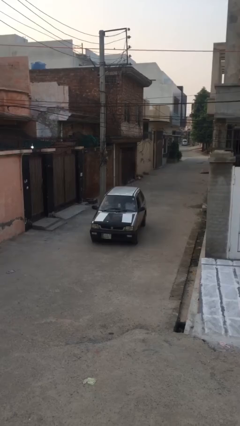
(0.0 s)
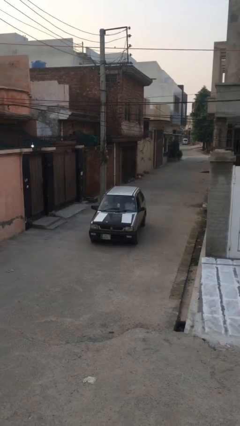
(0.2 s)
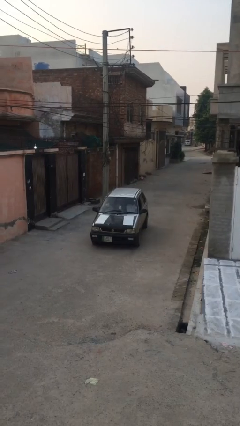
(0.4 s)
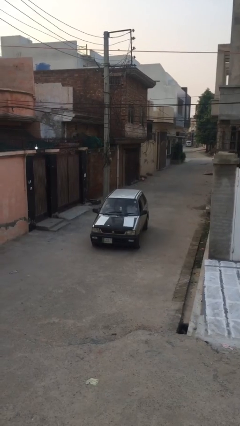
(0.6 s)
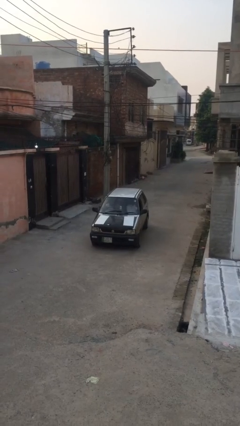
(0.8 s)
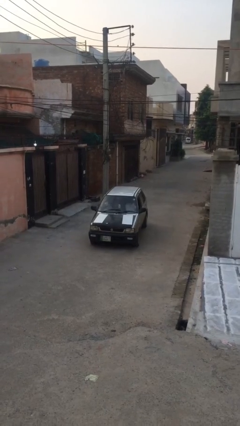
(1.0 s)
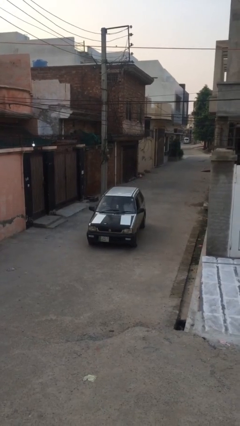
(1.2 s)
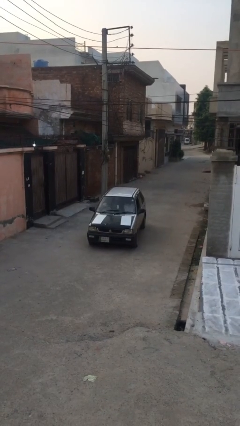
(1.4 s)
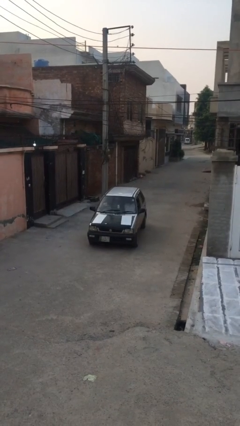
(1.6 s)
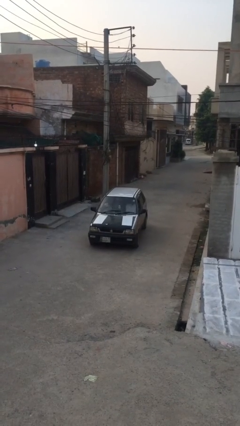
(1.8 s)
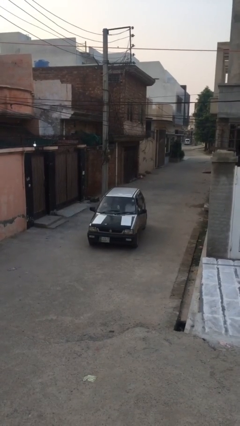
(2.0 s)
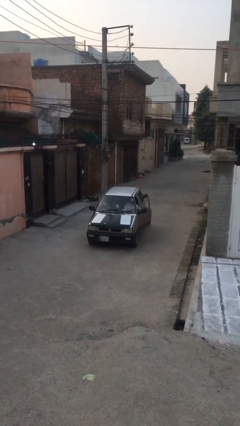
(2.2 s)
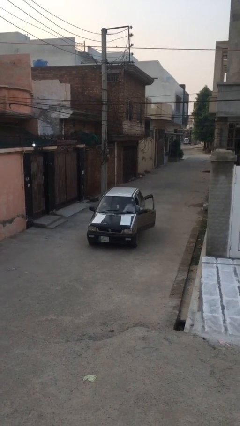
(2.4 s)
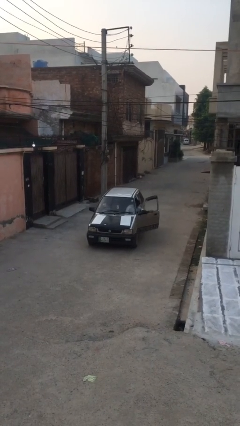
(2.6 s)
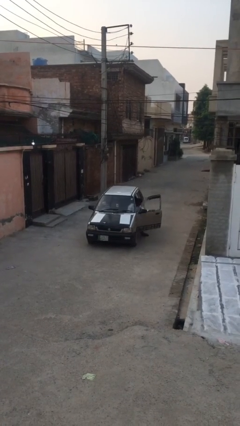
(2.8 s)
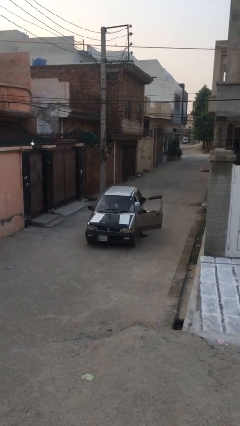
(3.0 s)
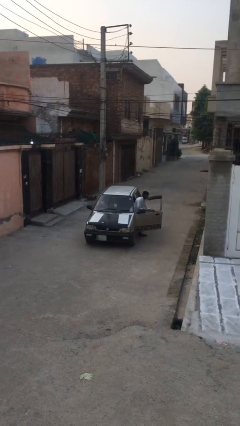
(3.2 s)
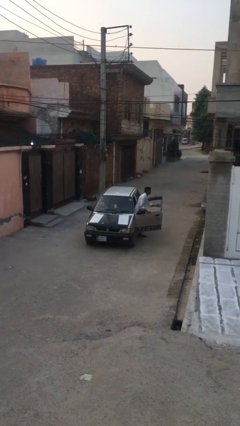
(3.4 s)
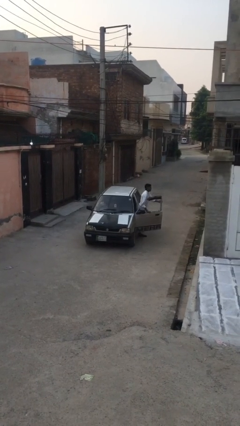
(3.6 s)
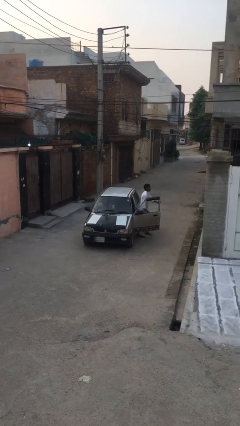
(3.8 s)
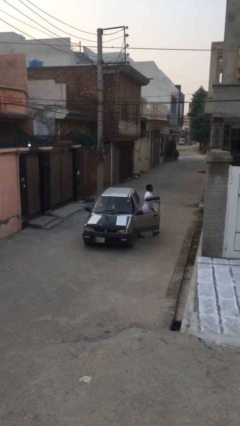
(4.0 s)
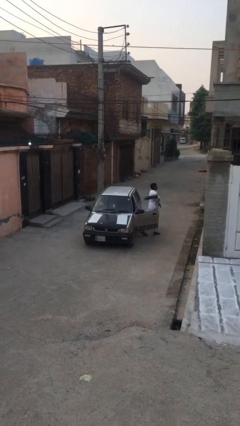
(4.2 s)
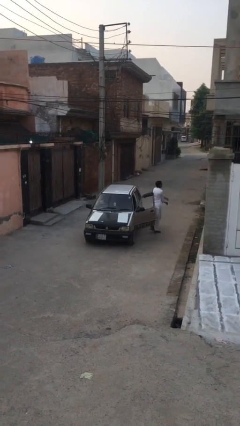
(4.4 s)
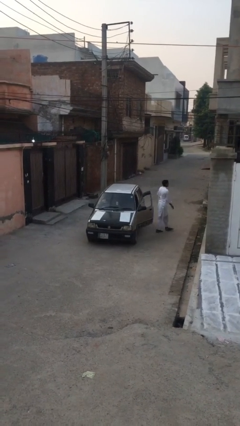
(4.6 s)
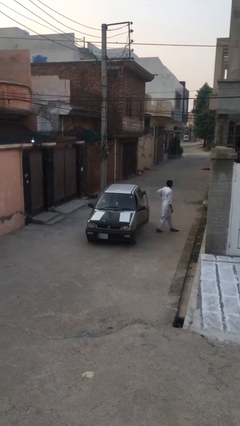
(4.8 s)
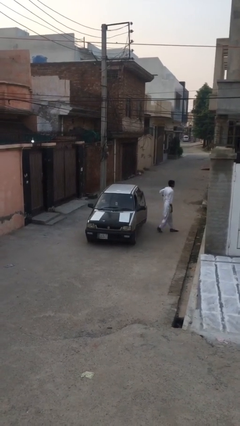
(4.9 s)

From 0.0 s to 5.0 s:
car drops off person

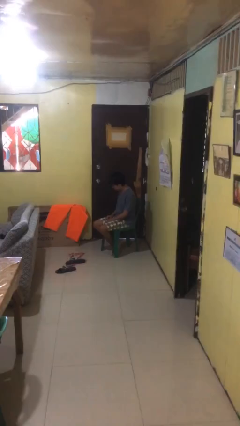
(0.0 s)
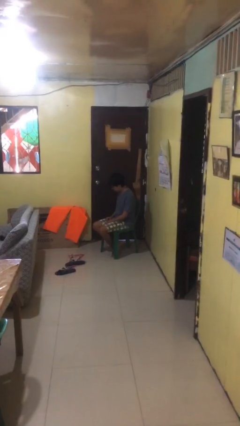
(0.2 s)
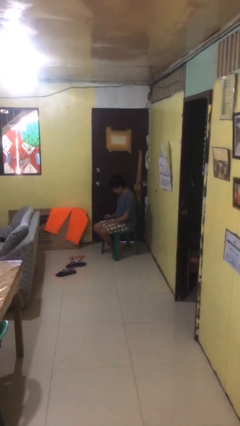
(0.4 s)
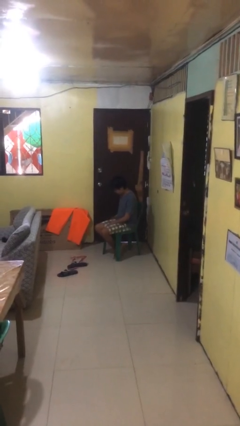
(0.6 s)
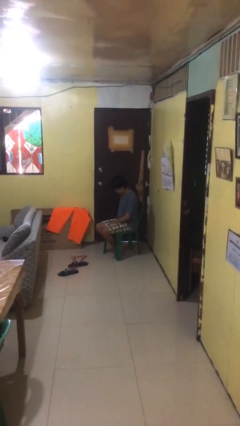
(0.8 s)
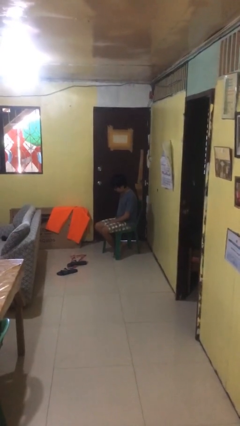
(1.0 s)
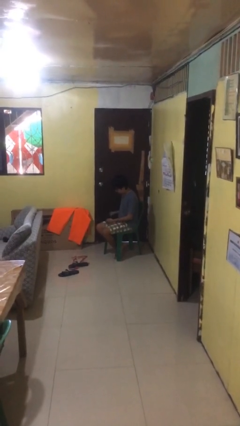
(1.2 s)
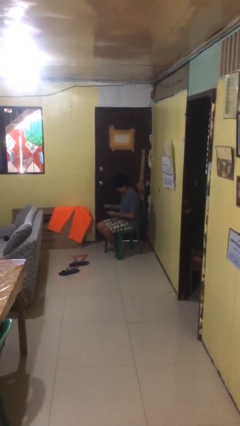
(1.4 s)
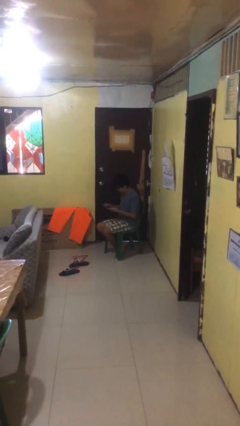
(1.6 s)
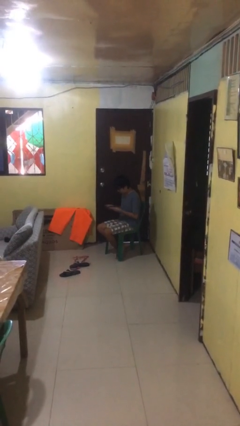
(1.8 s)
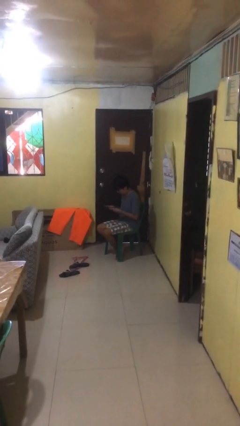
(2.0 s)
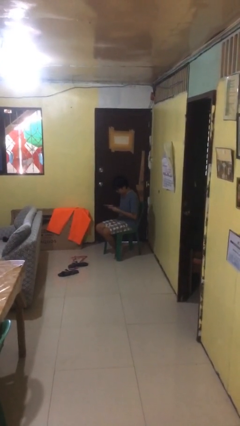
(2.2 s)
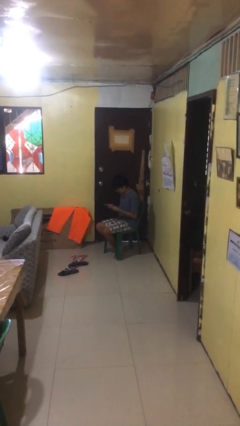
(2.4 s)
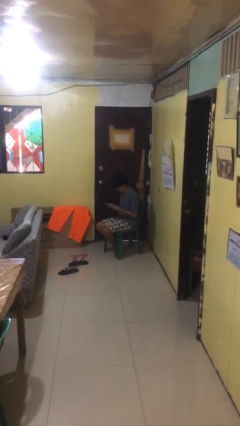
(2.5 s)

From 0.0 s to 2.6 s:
person takes phone from pocket

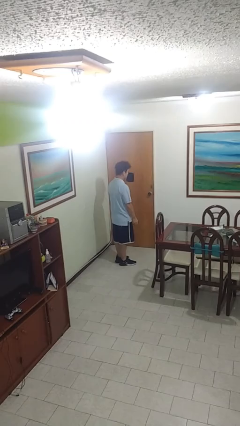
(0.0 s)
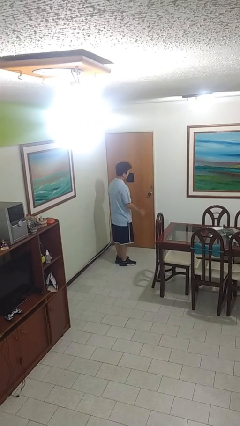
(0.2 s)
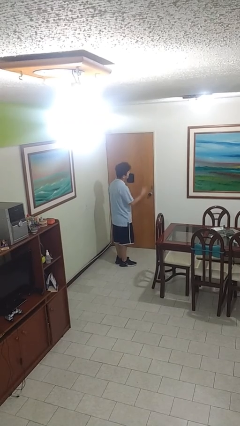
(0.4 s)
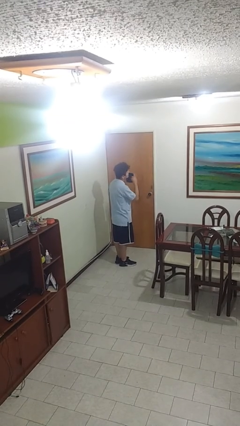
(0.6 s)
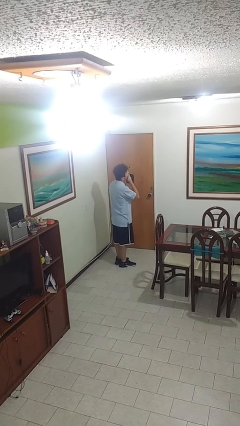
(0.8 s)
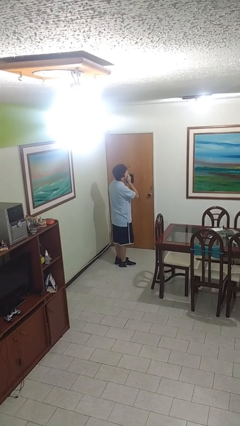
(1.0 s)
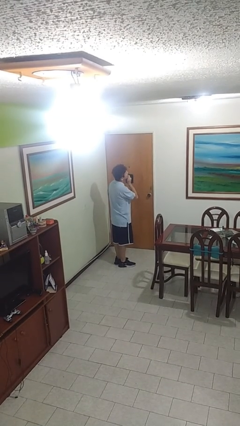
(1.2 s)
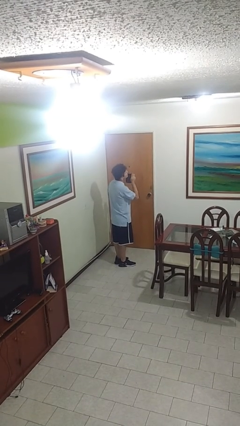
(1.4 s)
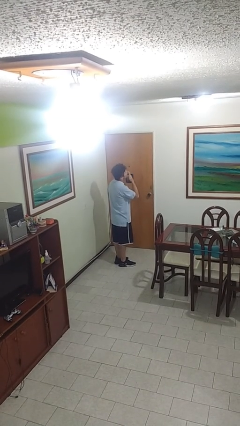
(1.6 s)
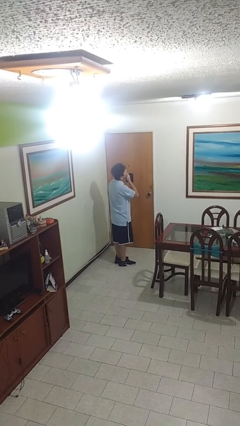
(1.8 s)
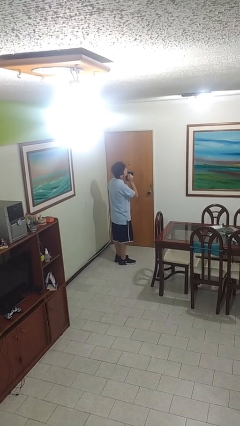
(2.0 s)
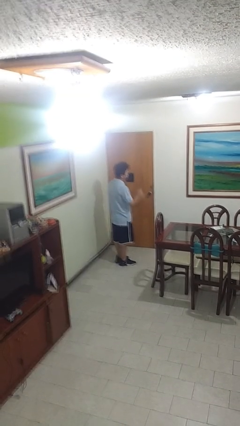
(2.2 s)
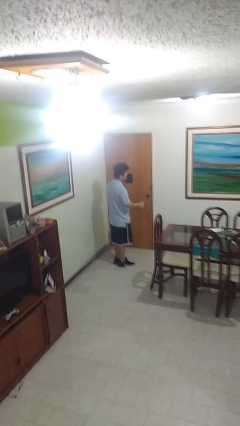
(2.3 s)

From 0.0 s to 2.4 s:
person strokes chin

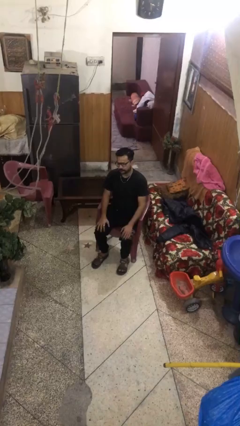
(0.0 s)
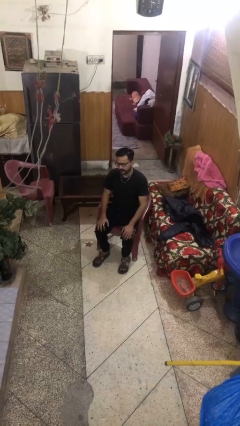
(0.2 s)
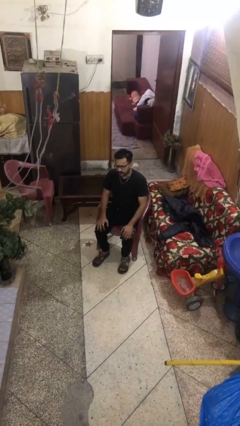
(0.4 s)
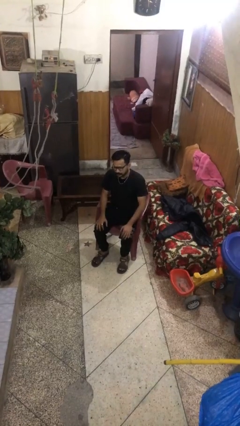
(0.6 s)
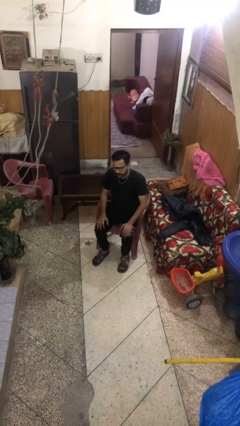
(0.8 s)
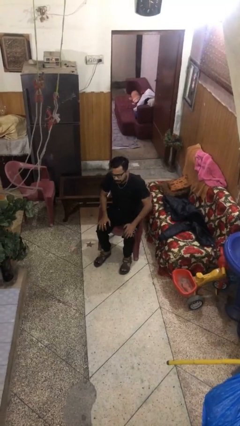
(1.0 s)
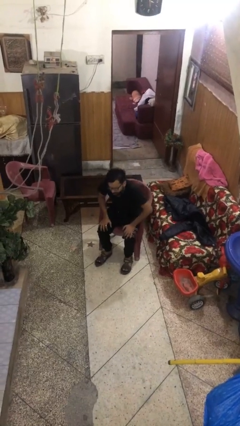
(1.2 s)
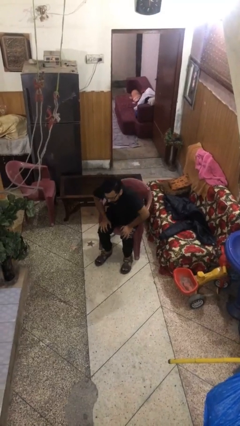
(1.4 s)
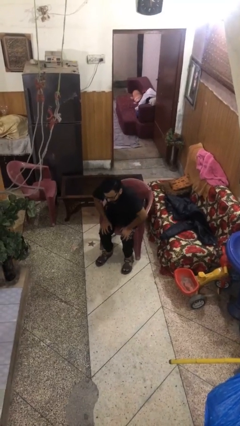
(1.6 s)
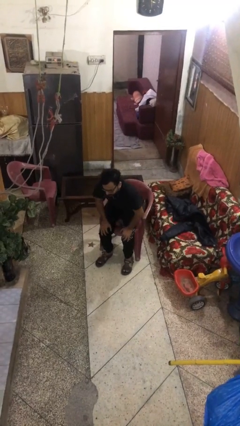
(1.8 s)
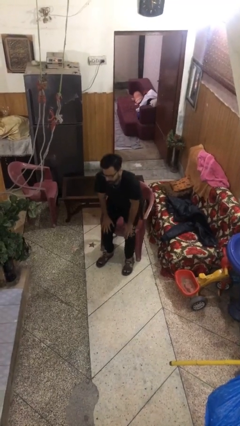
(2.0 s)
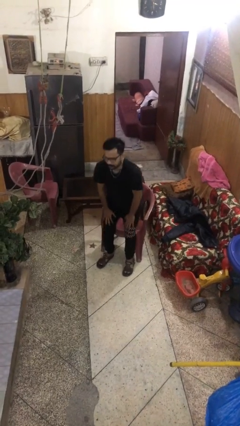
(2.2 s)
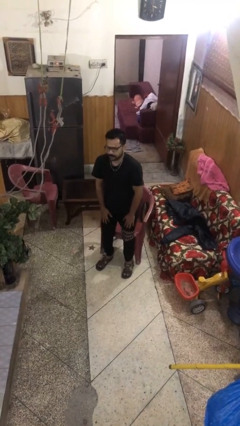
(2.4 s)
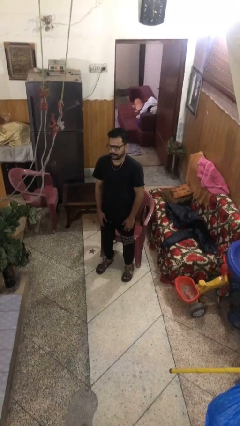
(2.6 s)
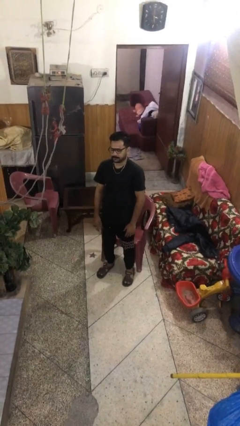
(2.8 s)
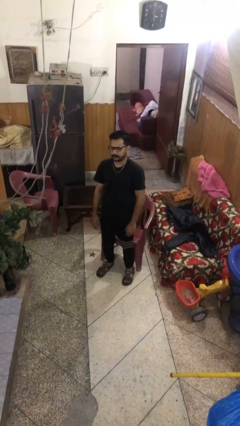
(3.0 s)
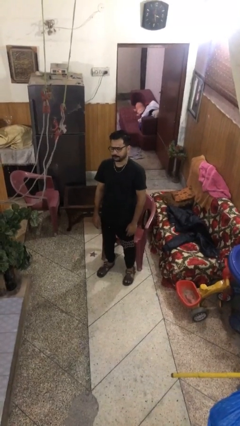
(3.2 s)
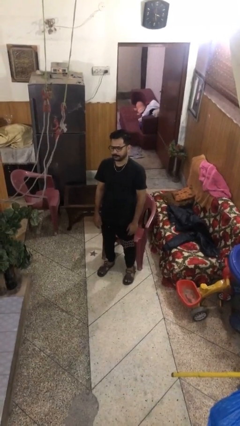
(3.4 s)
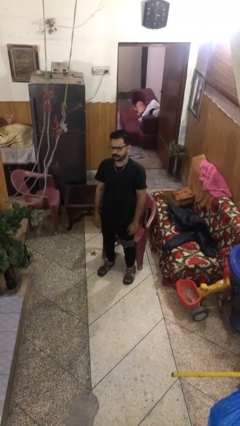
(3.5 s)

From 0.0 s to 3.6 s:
person stands up

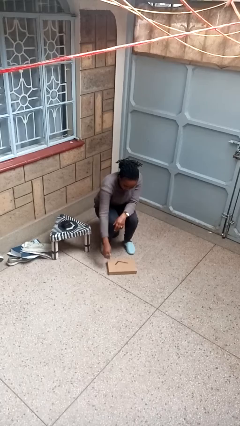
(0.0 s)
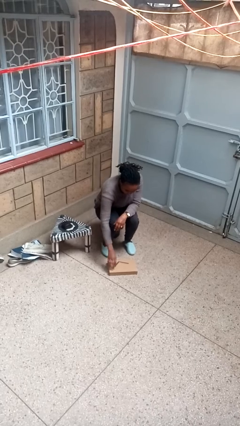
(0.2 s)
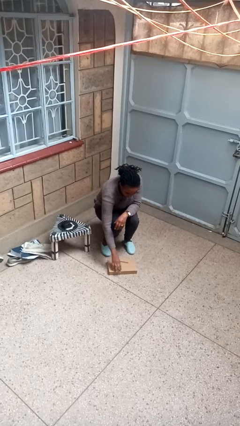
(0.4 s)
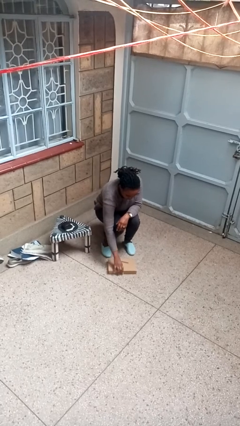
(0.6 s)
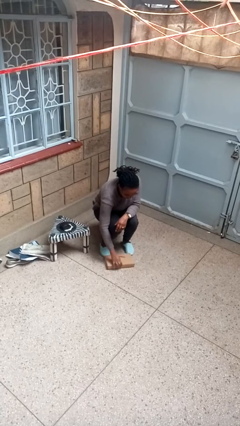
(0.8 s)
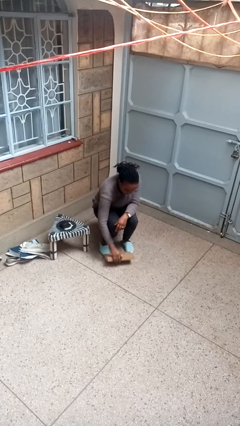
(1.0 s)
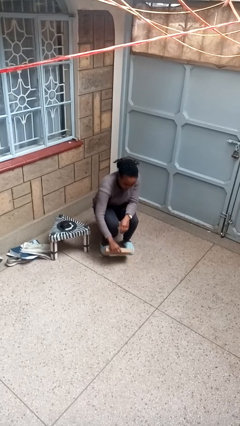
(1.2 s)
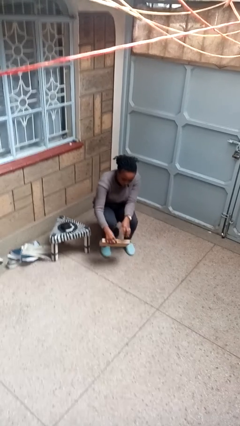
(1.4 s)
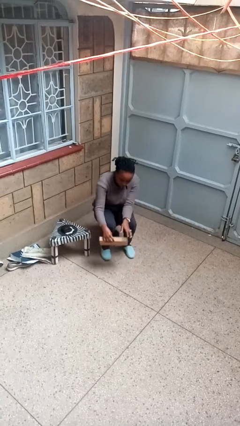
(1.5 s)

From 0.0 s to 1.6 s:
person picks up object from floor

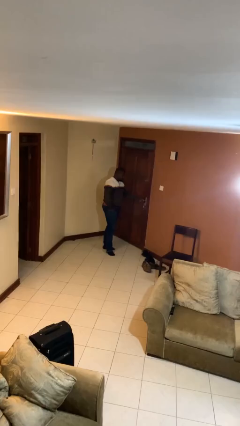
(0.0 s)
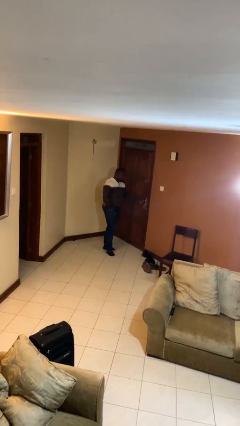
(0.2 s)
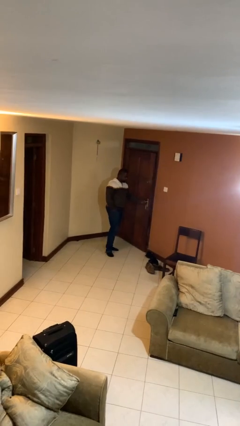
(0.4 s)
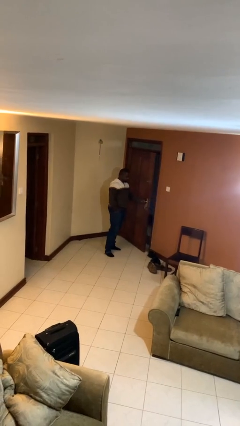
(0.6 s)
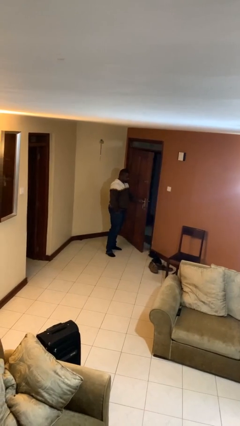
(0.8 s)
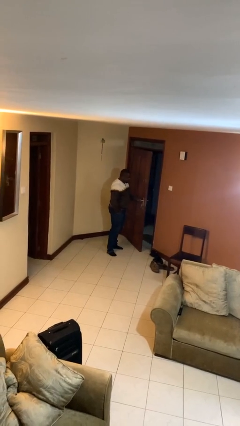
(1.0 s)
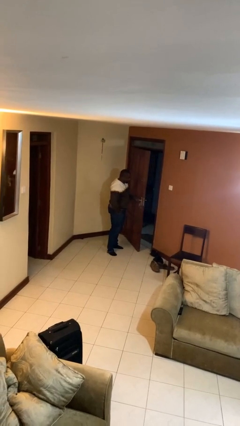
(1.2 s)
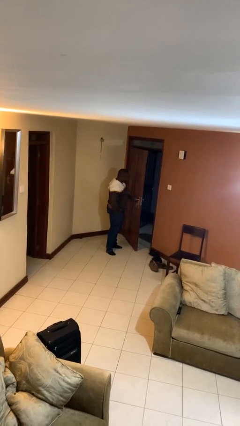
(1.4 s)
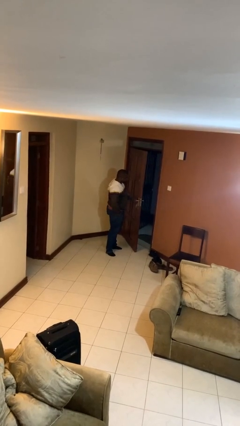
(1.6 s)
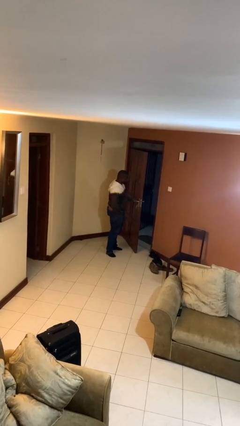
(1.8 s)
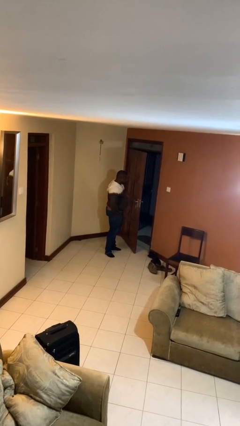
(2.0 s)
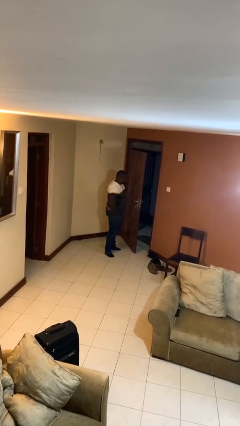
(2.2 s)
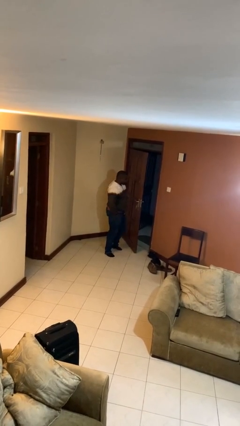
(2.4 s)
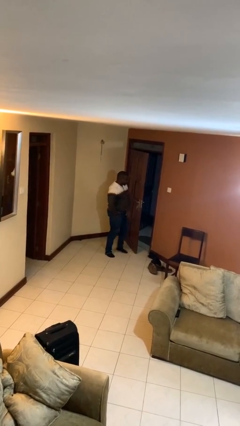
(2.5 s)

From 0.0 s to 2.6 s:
person opens facility door
